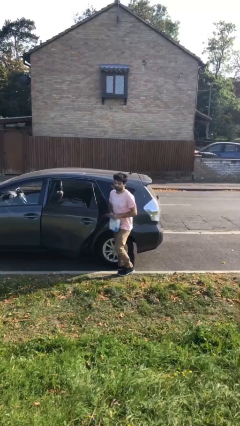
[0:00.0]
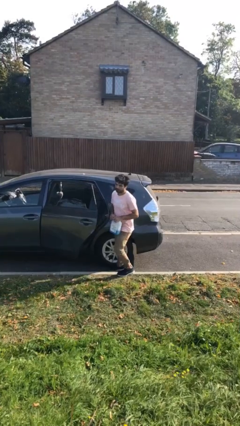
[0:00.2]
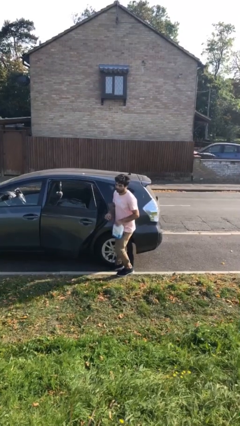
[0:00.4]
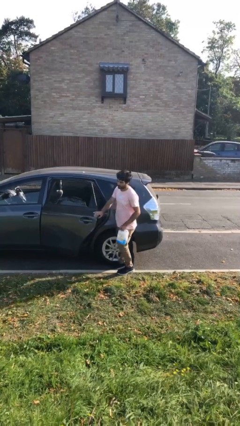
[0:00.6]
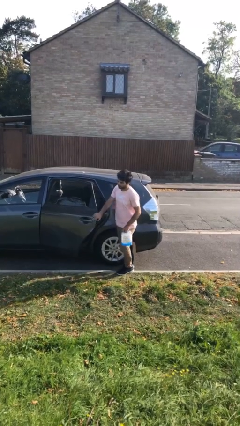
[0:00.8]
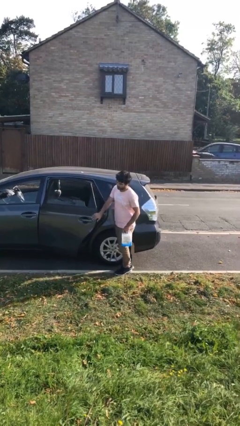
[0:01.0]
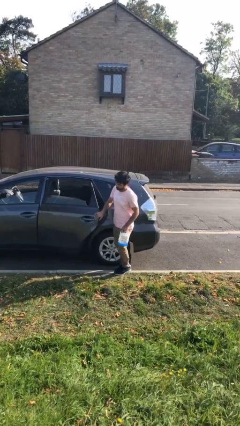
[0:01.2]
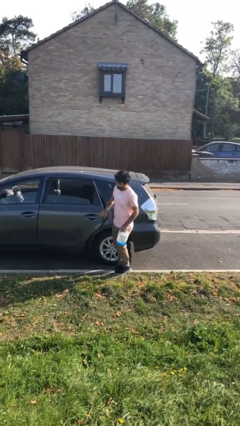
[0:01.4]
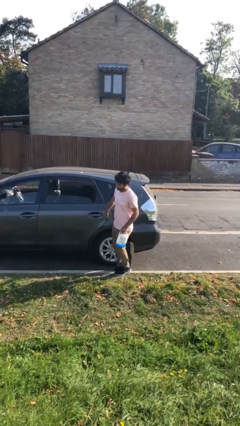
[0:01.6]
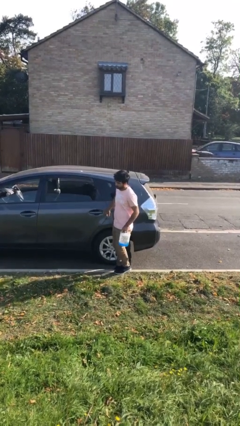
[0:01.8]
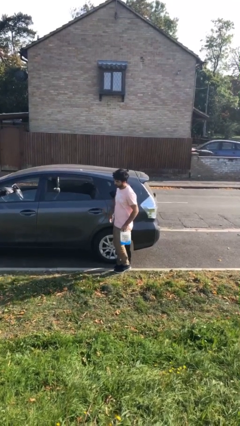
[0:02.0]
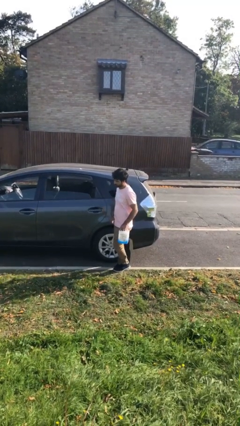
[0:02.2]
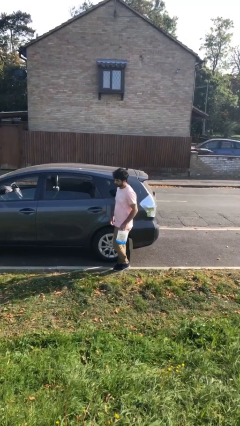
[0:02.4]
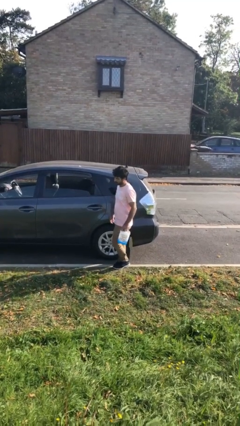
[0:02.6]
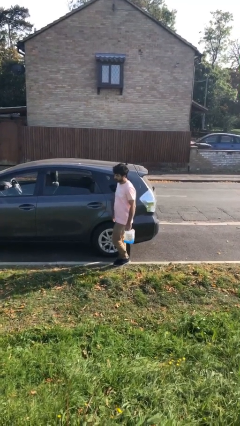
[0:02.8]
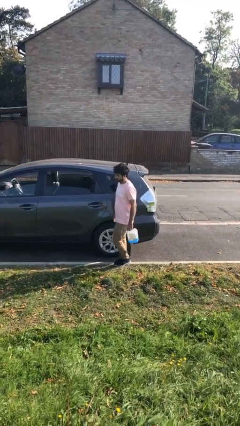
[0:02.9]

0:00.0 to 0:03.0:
person closes car door

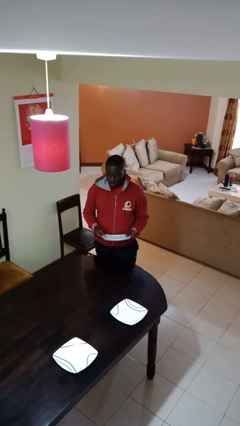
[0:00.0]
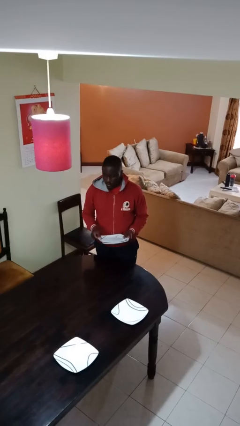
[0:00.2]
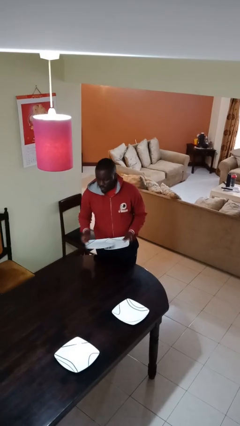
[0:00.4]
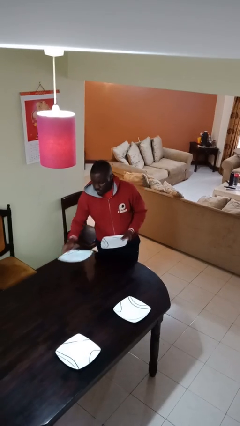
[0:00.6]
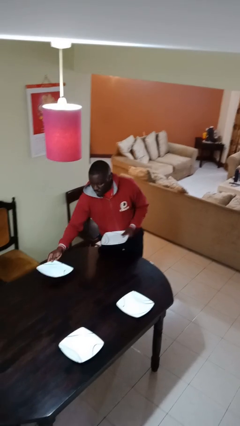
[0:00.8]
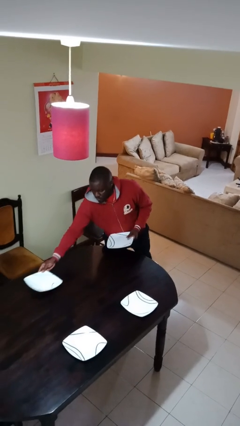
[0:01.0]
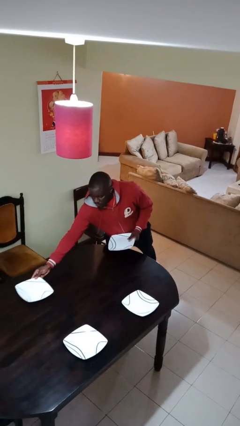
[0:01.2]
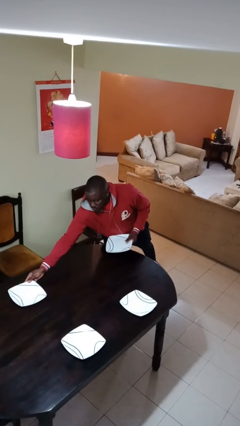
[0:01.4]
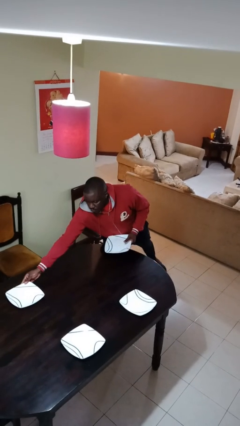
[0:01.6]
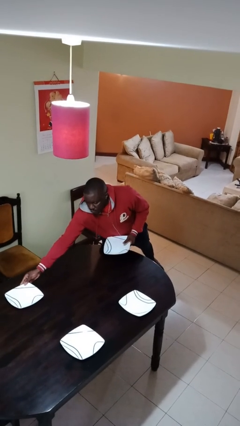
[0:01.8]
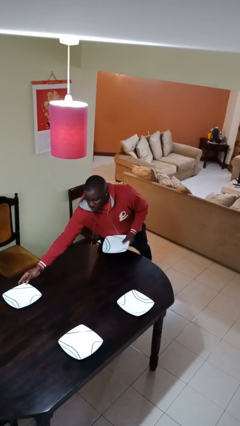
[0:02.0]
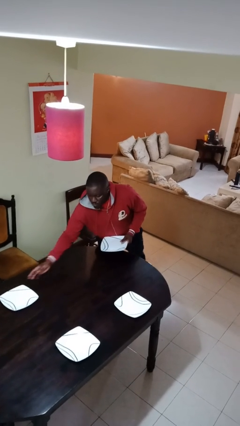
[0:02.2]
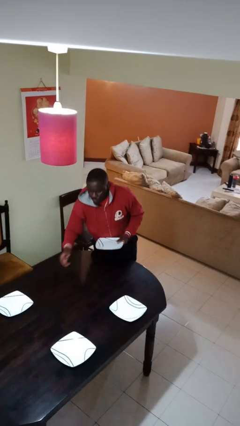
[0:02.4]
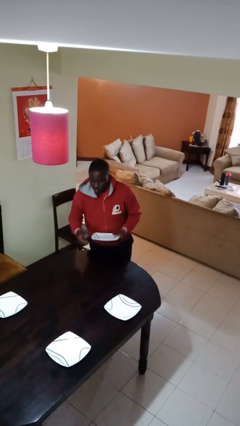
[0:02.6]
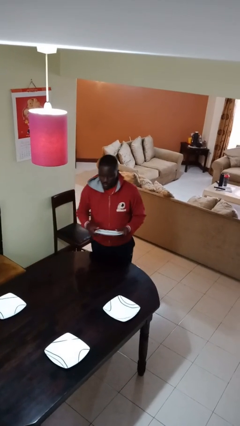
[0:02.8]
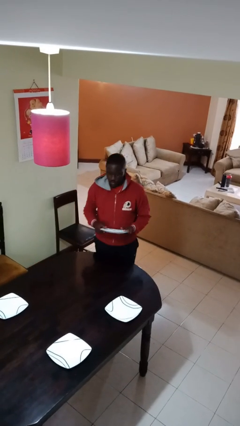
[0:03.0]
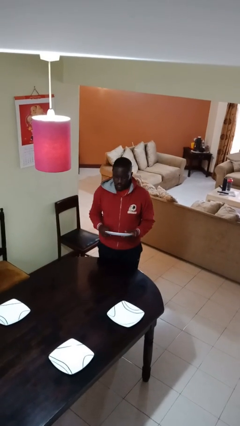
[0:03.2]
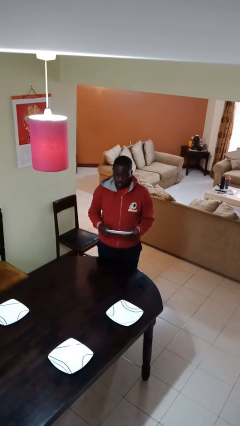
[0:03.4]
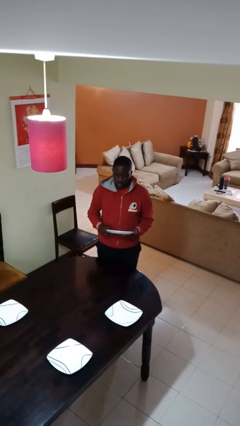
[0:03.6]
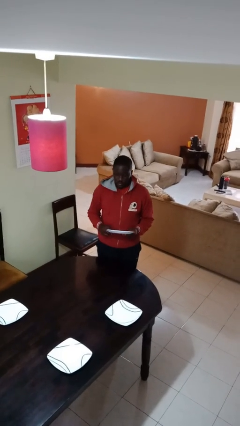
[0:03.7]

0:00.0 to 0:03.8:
person sets table

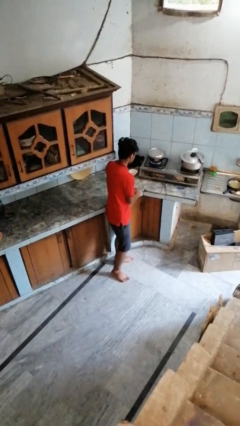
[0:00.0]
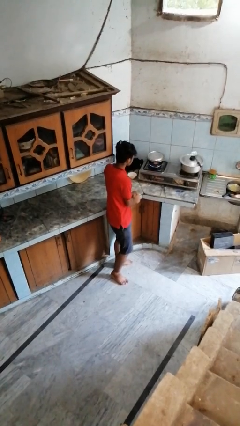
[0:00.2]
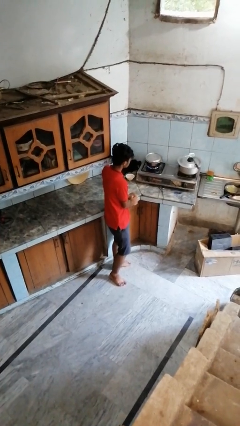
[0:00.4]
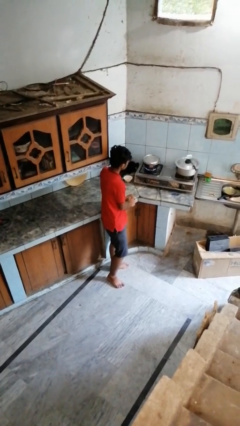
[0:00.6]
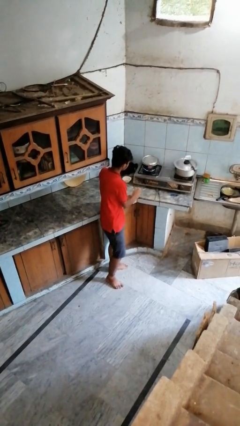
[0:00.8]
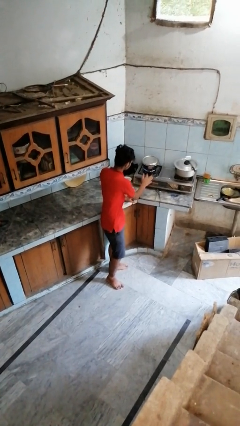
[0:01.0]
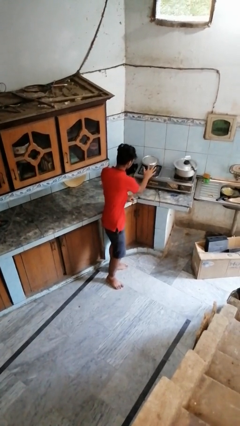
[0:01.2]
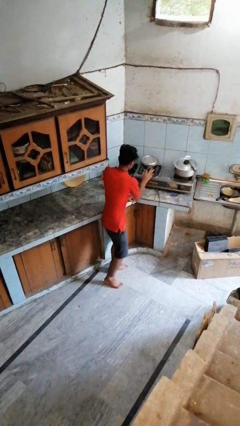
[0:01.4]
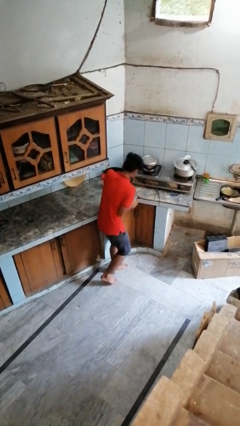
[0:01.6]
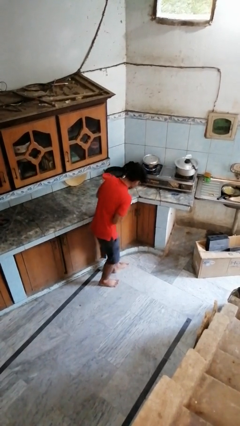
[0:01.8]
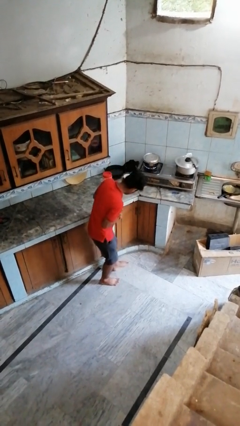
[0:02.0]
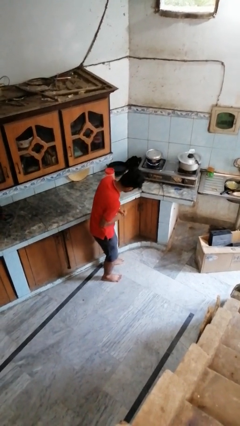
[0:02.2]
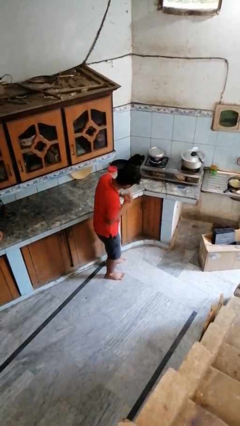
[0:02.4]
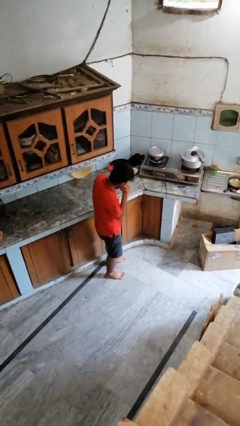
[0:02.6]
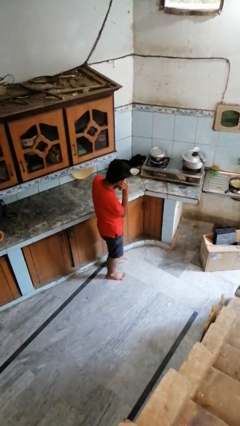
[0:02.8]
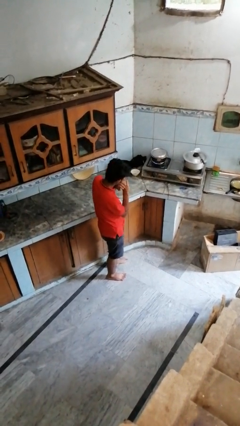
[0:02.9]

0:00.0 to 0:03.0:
person burns hand

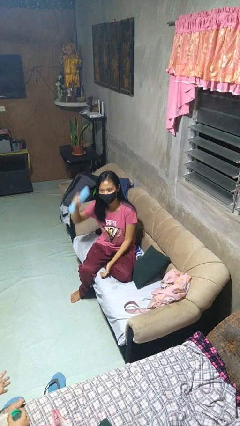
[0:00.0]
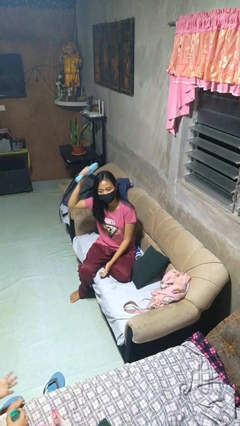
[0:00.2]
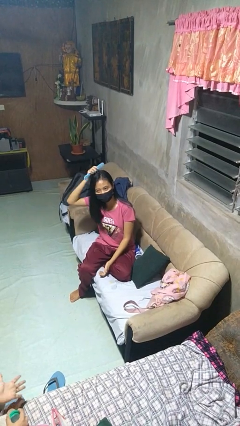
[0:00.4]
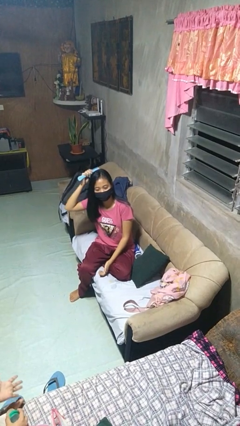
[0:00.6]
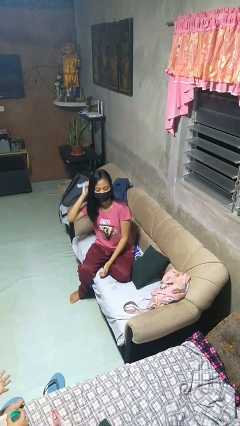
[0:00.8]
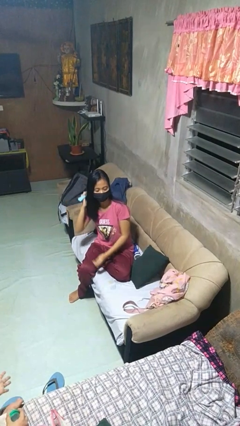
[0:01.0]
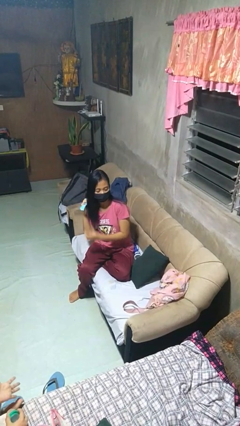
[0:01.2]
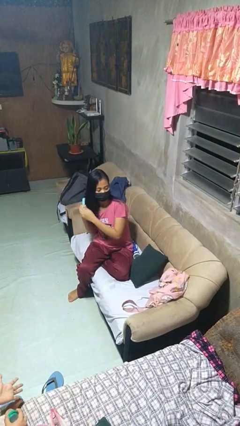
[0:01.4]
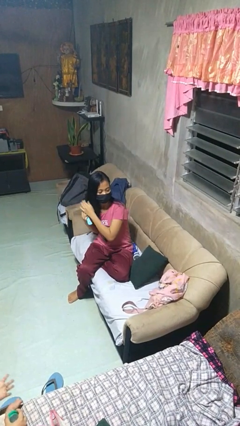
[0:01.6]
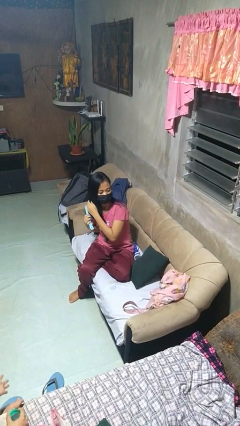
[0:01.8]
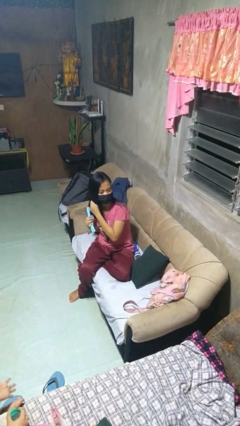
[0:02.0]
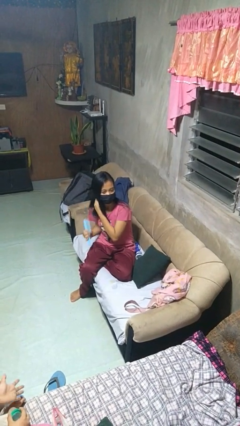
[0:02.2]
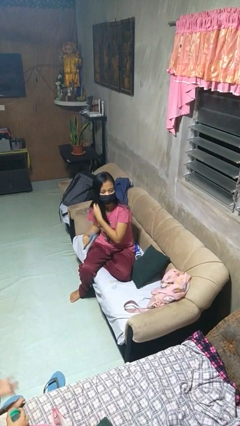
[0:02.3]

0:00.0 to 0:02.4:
person brushes hair

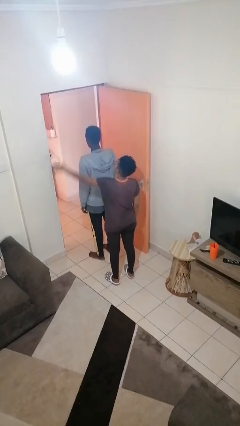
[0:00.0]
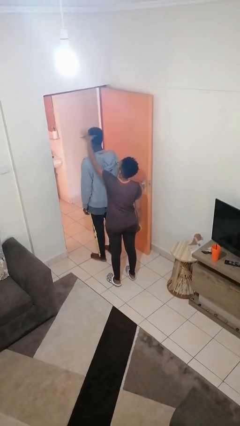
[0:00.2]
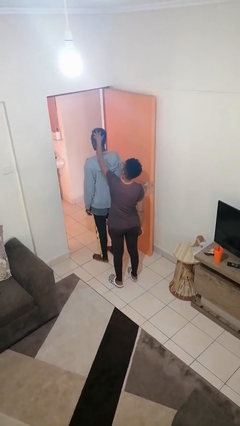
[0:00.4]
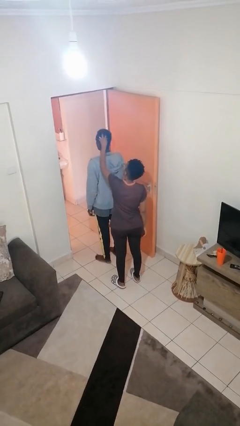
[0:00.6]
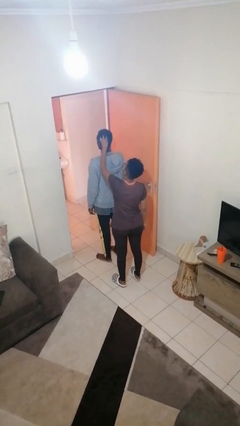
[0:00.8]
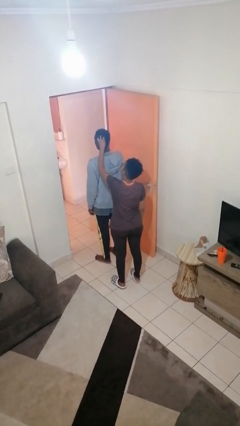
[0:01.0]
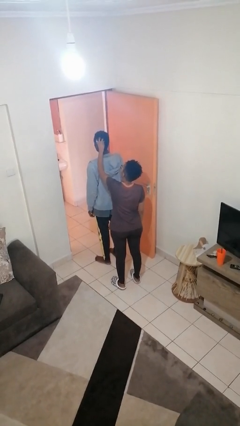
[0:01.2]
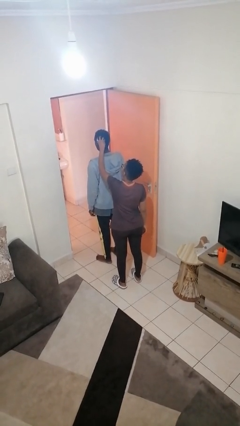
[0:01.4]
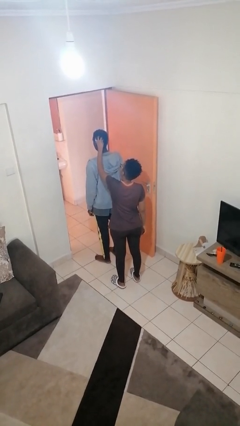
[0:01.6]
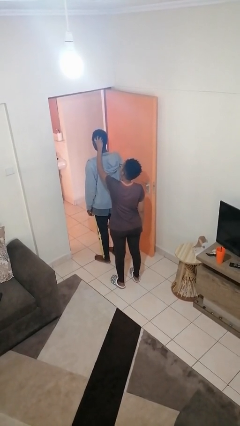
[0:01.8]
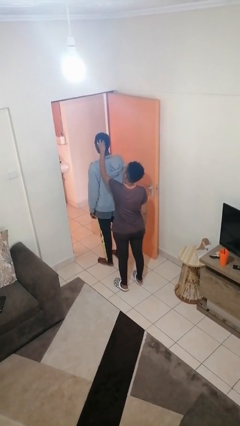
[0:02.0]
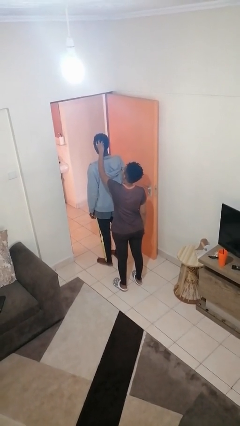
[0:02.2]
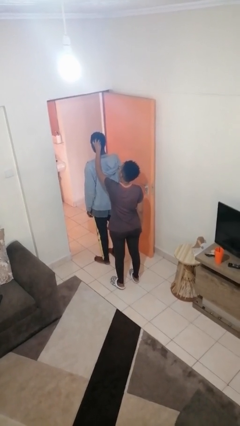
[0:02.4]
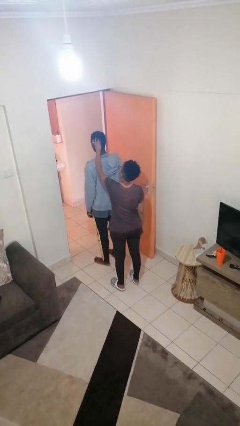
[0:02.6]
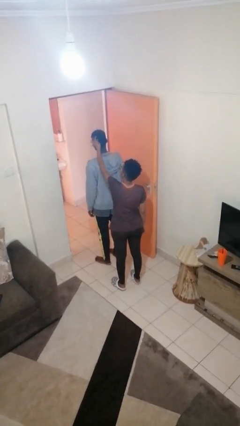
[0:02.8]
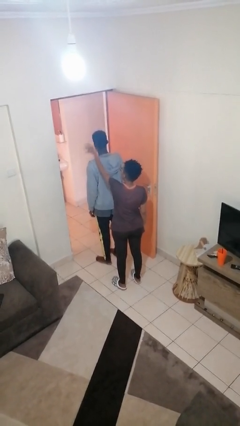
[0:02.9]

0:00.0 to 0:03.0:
person grabs person by hair

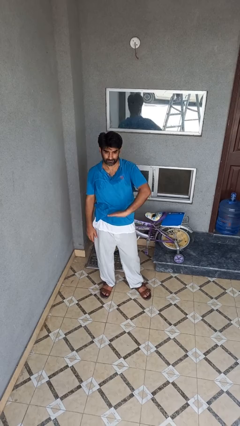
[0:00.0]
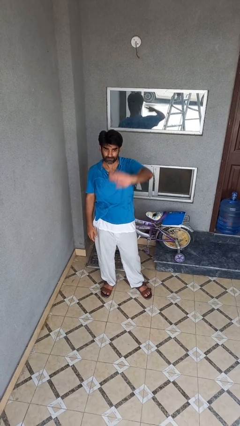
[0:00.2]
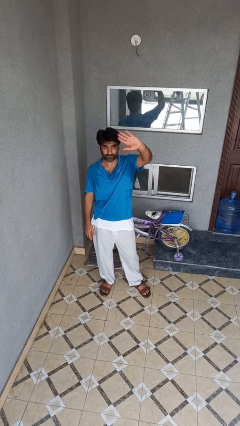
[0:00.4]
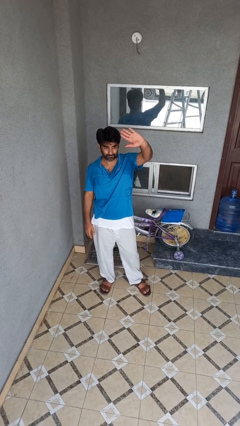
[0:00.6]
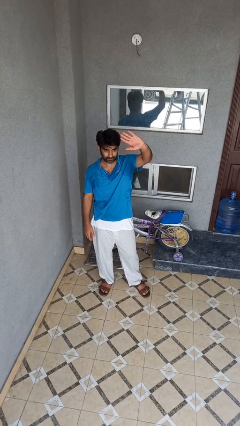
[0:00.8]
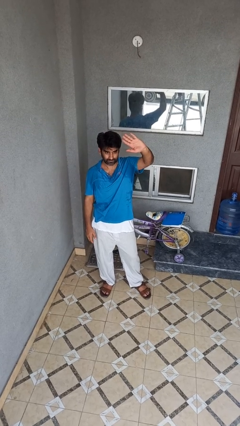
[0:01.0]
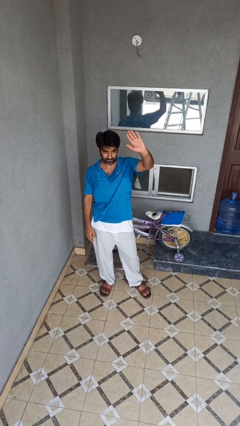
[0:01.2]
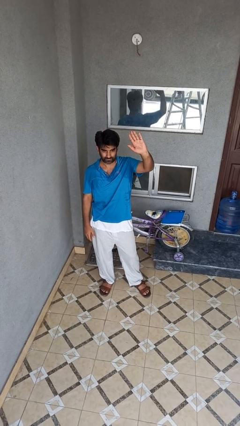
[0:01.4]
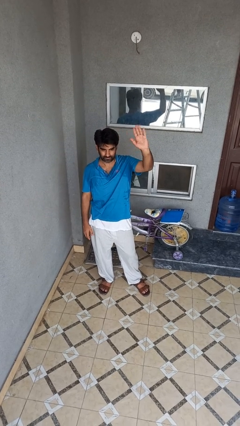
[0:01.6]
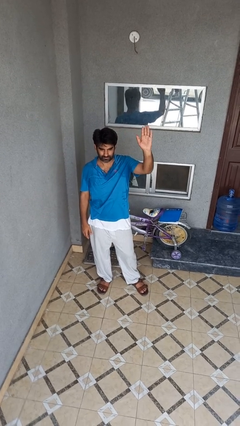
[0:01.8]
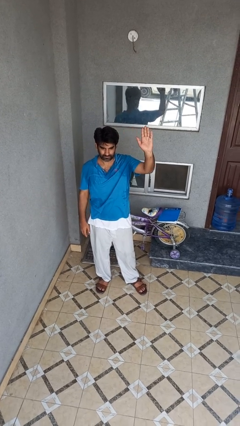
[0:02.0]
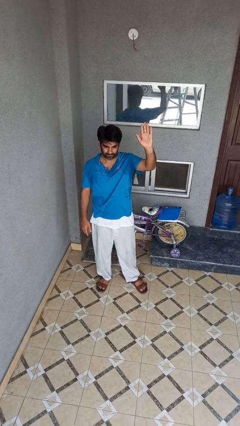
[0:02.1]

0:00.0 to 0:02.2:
person gestures swipe up
